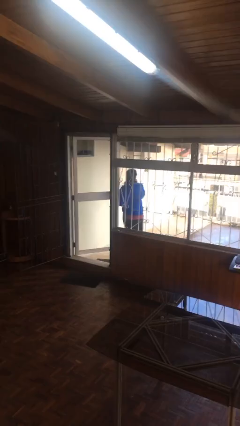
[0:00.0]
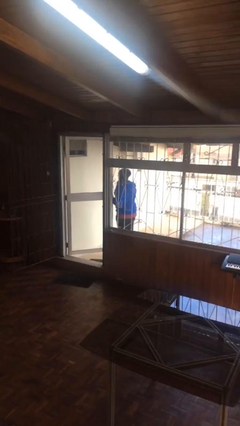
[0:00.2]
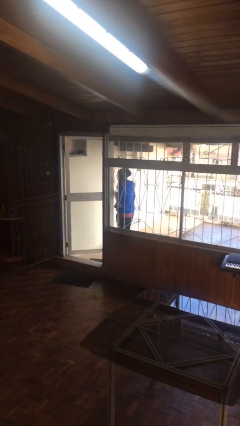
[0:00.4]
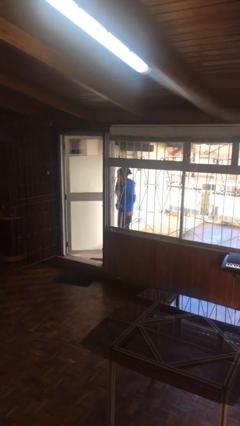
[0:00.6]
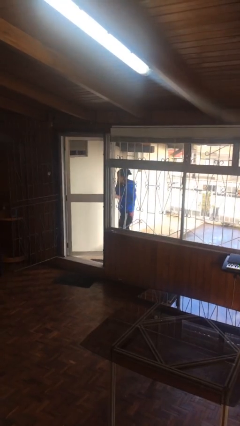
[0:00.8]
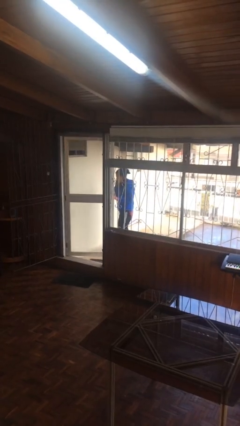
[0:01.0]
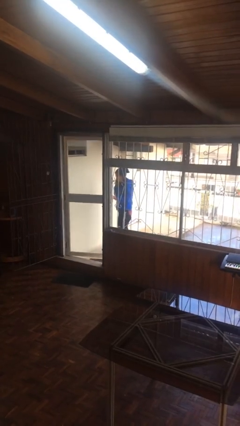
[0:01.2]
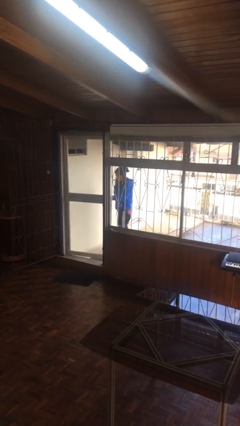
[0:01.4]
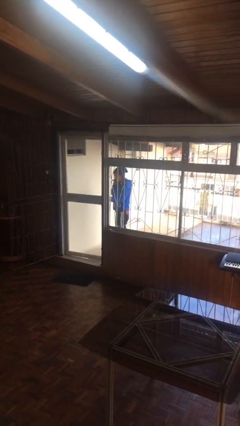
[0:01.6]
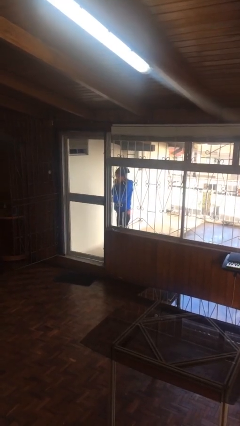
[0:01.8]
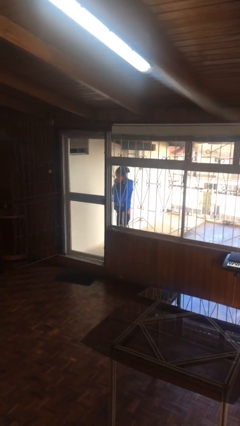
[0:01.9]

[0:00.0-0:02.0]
person closes facility door

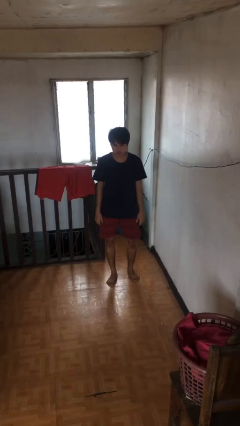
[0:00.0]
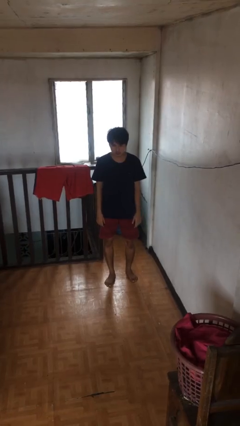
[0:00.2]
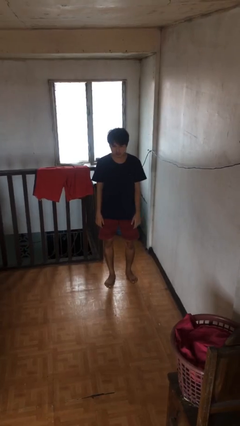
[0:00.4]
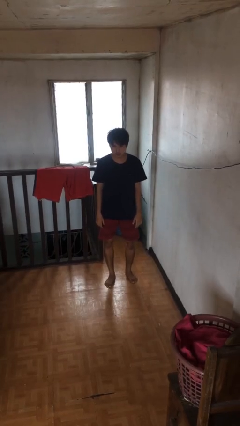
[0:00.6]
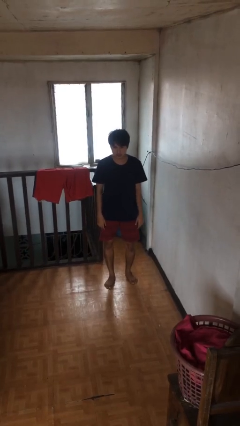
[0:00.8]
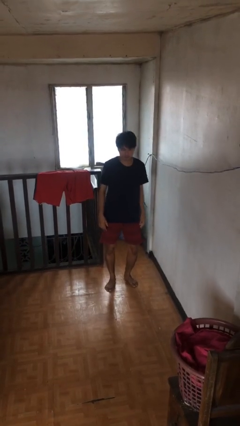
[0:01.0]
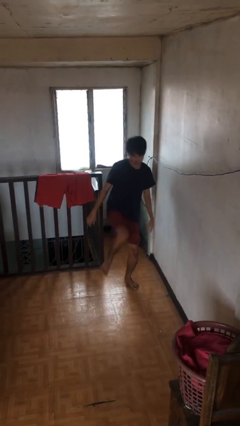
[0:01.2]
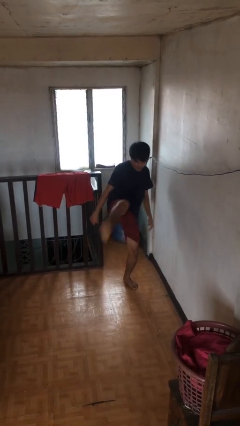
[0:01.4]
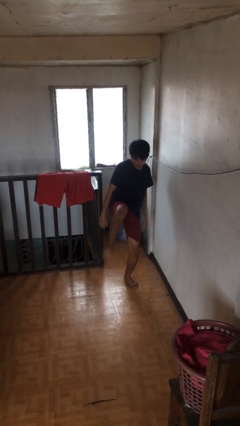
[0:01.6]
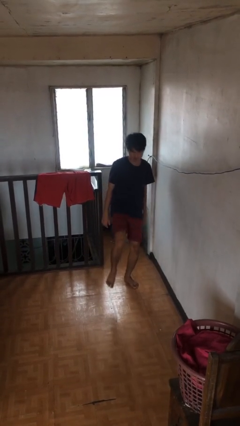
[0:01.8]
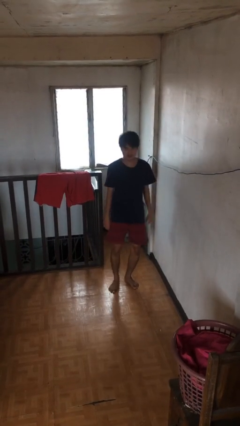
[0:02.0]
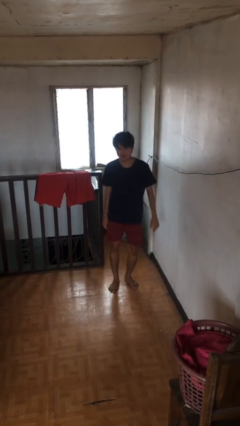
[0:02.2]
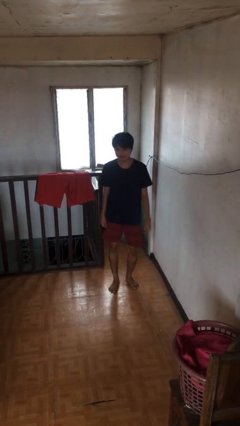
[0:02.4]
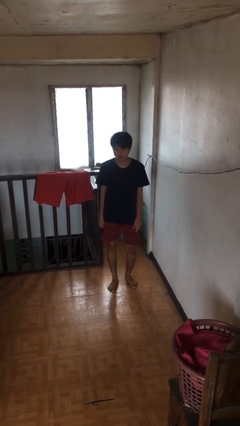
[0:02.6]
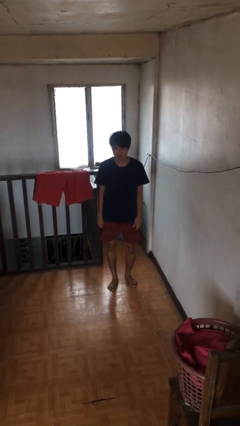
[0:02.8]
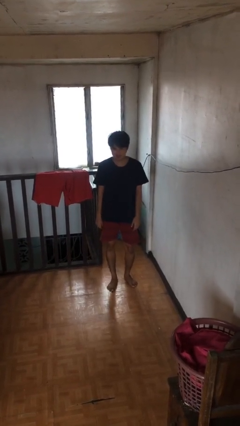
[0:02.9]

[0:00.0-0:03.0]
person karate kicks

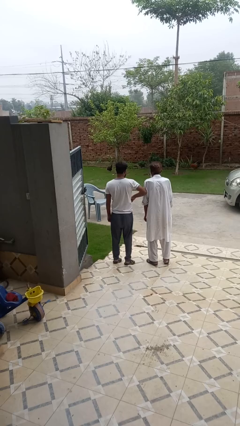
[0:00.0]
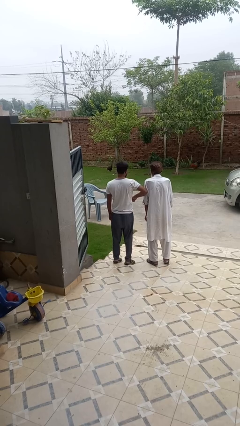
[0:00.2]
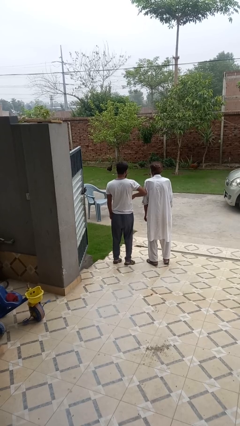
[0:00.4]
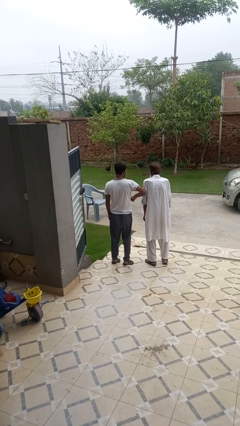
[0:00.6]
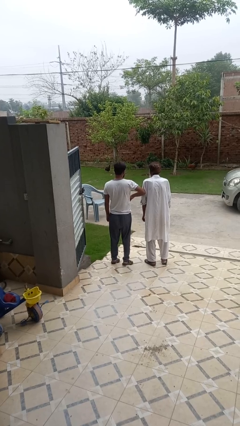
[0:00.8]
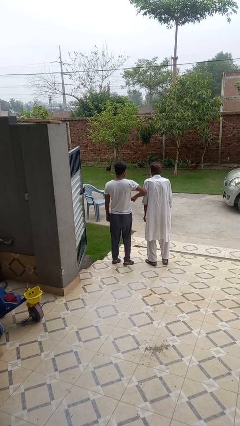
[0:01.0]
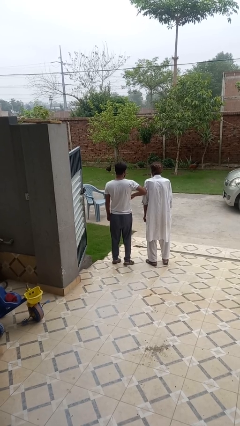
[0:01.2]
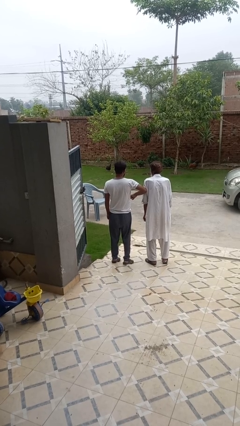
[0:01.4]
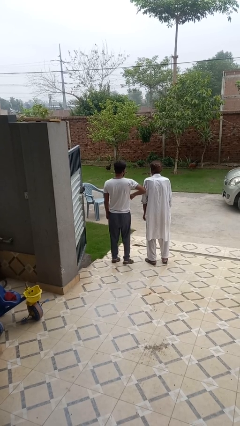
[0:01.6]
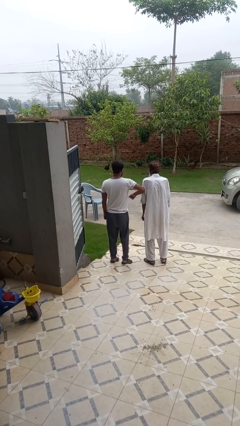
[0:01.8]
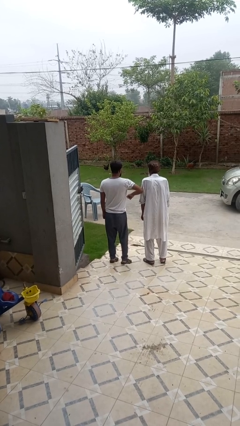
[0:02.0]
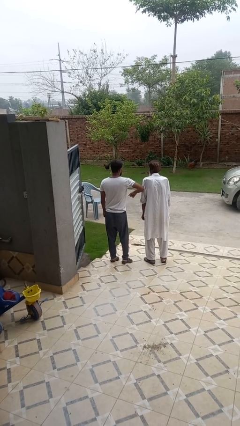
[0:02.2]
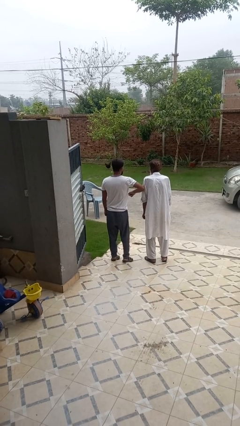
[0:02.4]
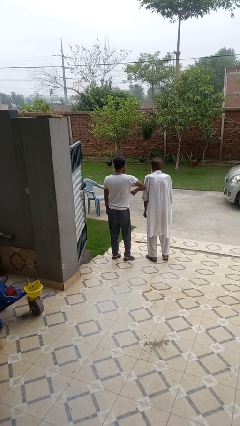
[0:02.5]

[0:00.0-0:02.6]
person nudges person with elbow

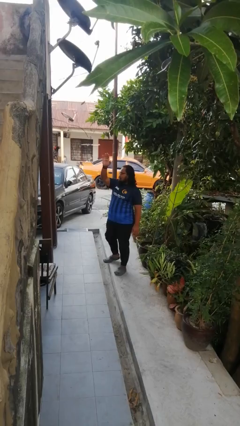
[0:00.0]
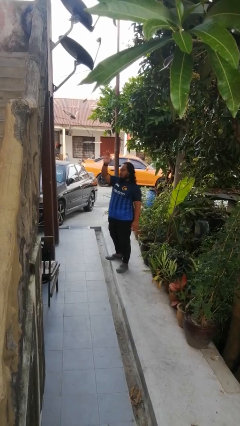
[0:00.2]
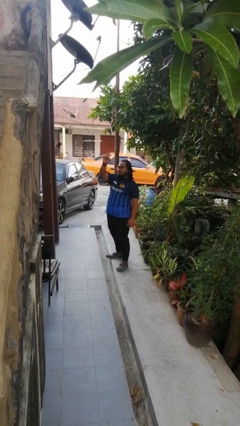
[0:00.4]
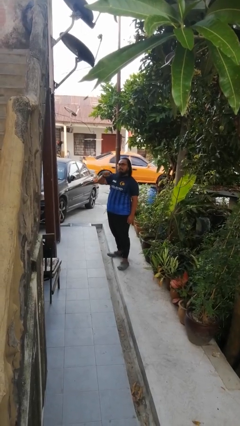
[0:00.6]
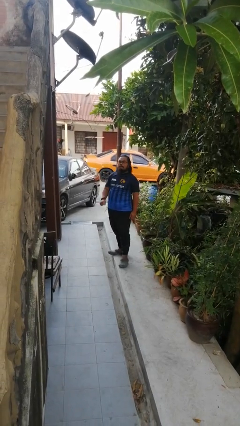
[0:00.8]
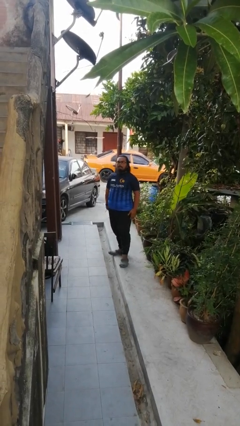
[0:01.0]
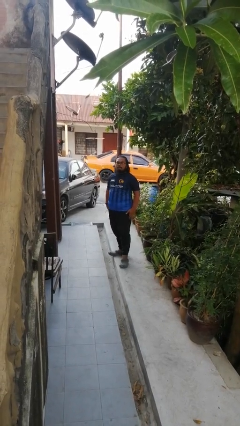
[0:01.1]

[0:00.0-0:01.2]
person gestures lower hand

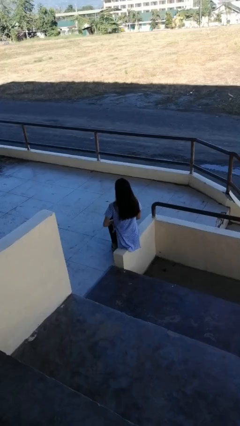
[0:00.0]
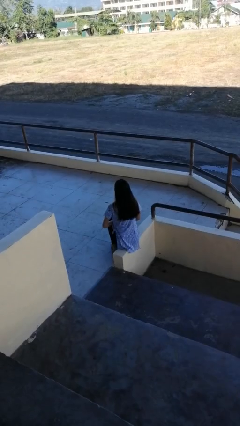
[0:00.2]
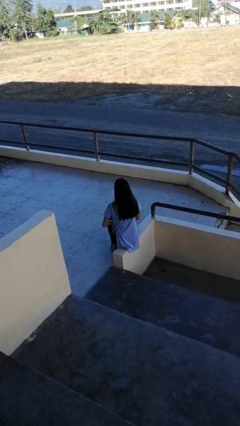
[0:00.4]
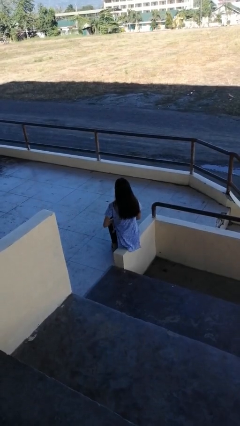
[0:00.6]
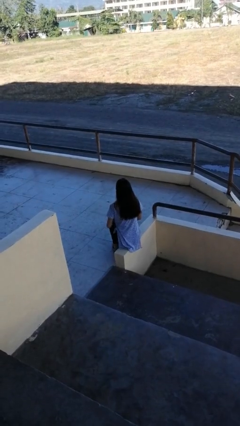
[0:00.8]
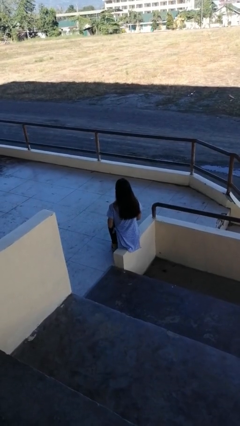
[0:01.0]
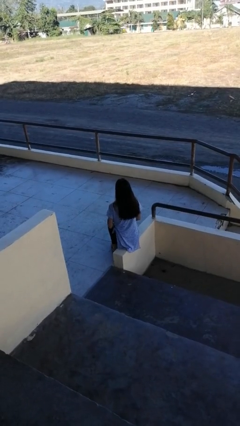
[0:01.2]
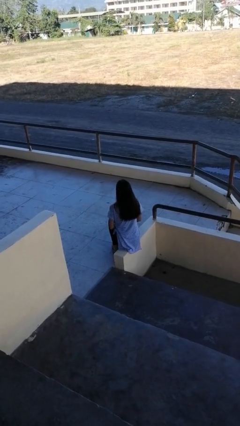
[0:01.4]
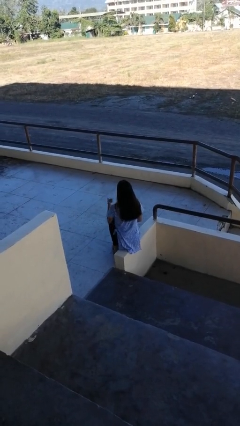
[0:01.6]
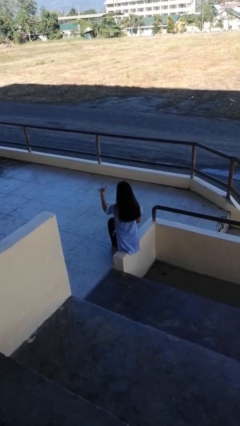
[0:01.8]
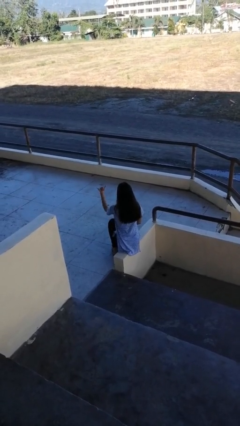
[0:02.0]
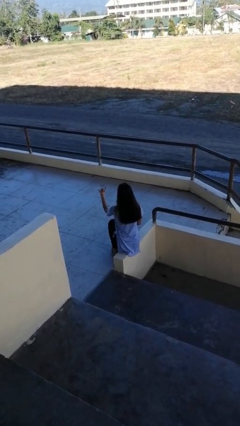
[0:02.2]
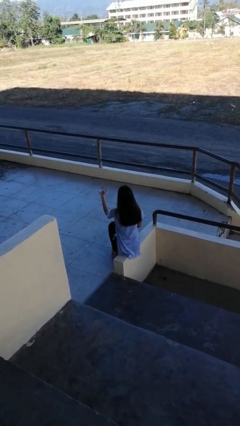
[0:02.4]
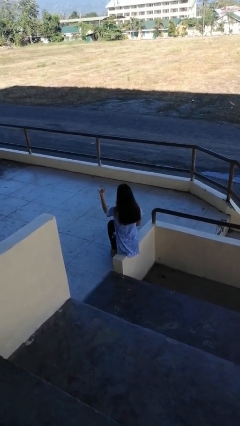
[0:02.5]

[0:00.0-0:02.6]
person gestures hang loose

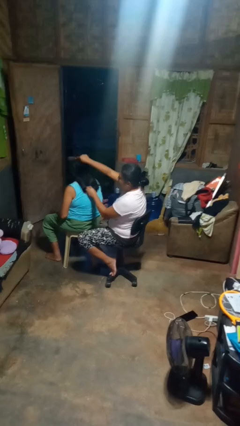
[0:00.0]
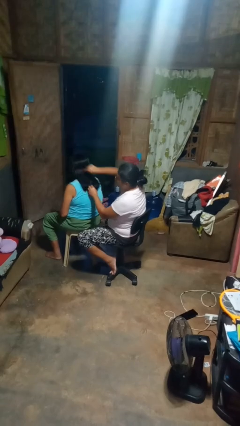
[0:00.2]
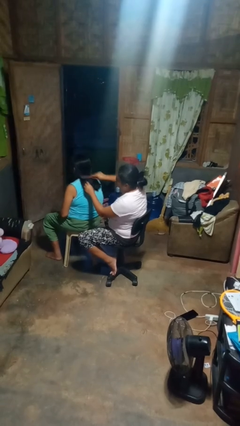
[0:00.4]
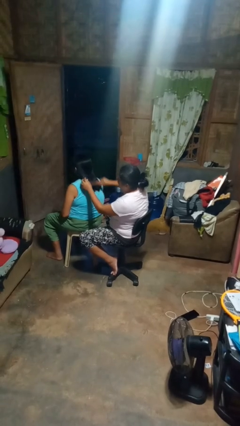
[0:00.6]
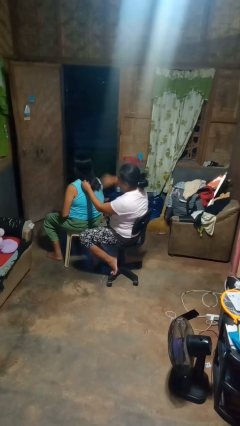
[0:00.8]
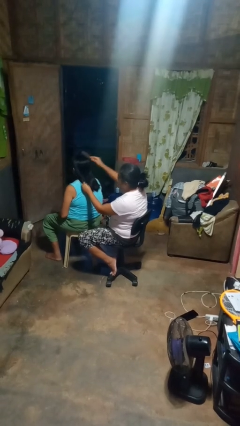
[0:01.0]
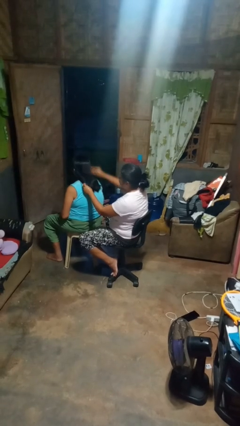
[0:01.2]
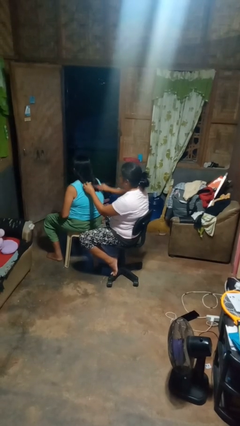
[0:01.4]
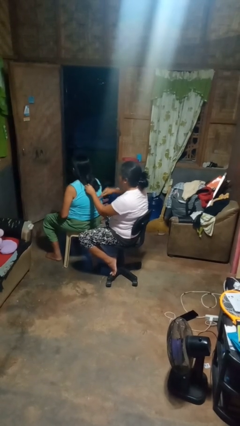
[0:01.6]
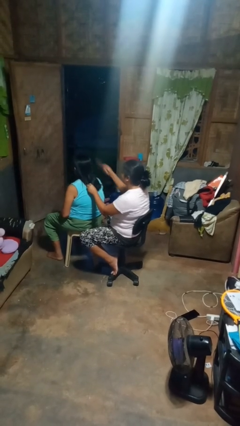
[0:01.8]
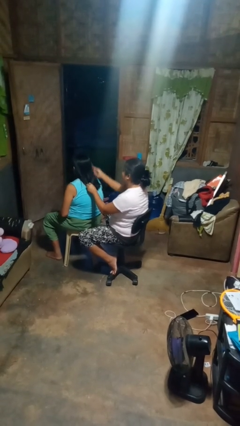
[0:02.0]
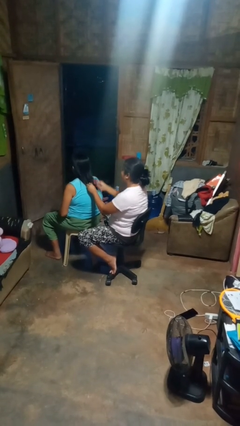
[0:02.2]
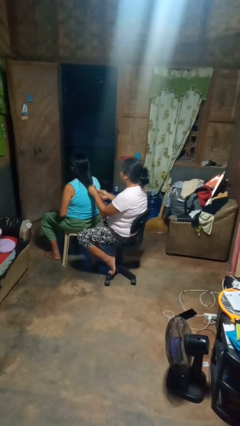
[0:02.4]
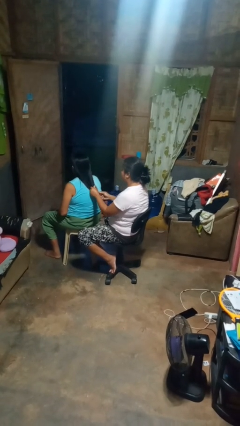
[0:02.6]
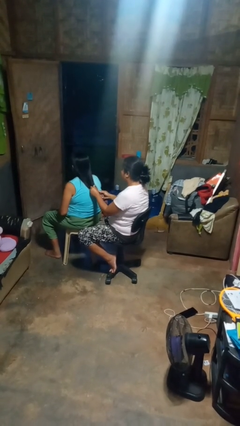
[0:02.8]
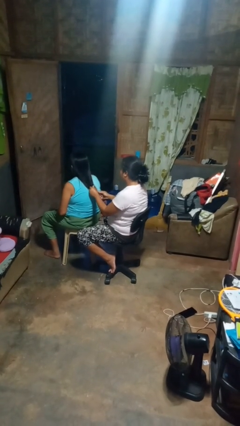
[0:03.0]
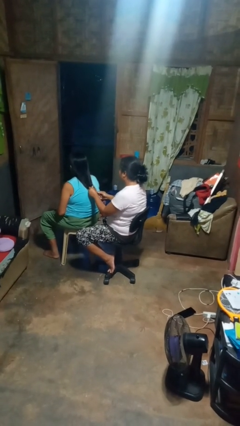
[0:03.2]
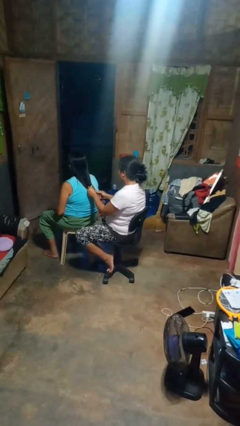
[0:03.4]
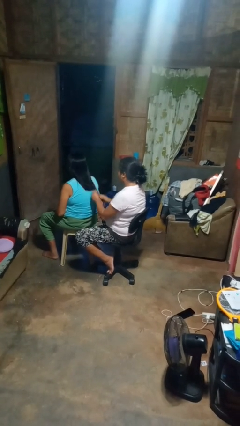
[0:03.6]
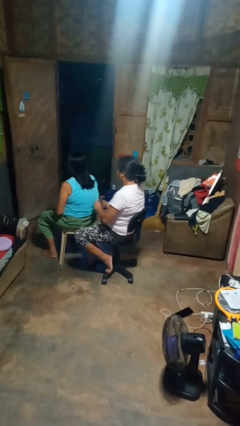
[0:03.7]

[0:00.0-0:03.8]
person brushes hair of person

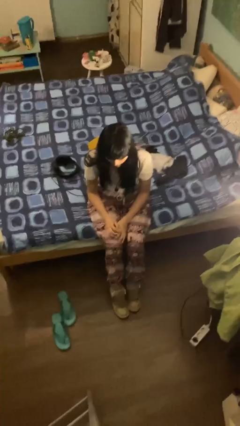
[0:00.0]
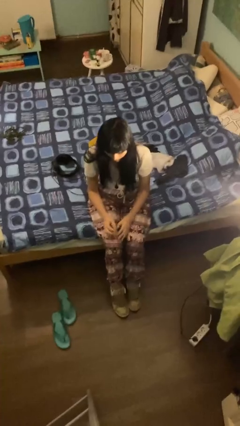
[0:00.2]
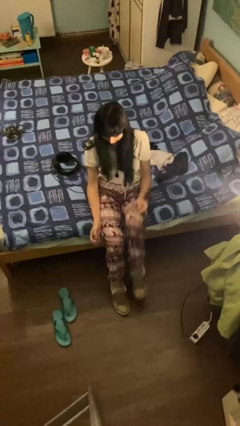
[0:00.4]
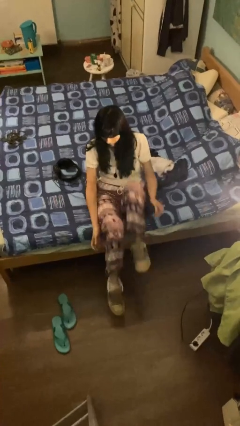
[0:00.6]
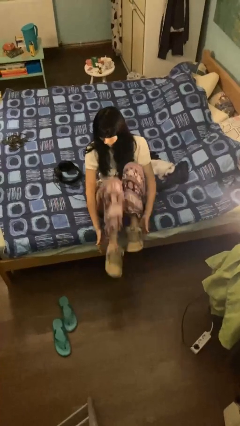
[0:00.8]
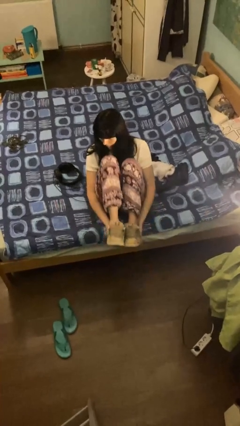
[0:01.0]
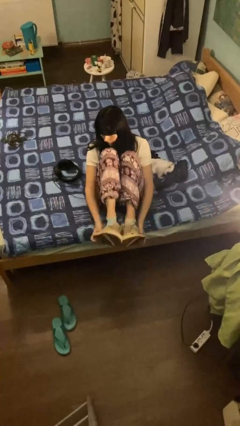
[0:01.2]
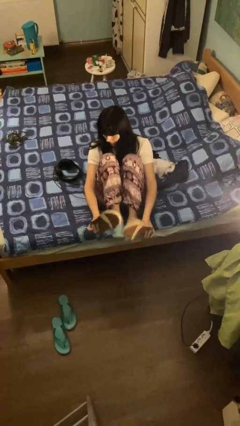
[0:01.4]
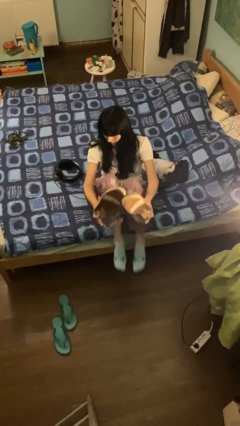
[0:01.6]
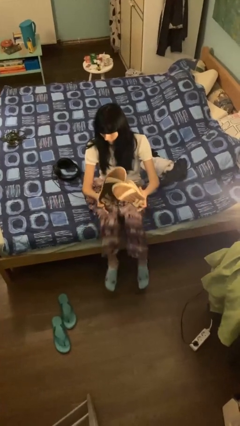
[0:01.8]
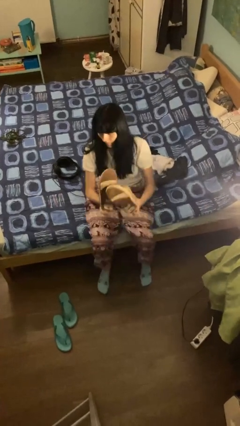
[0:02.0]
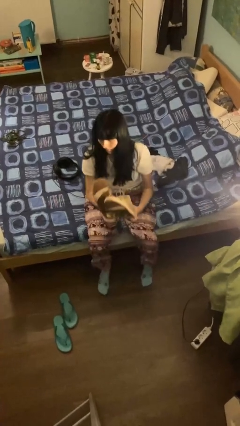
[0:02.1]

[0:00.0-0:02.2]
person takes off shoes
